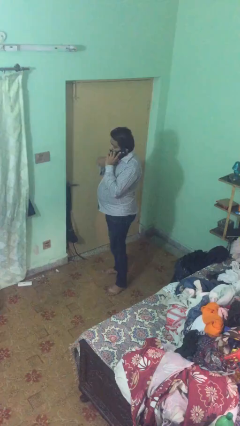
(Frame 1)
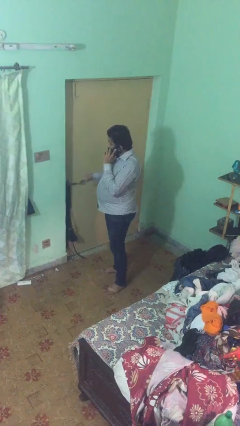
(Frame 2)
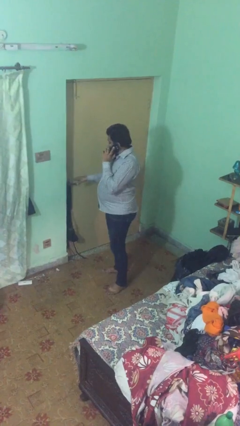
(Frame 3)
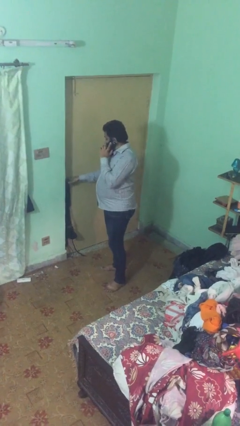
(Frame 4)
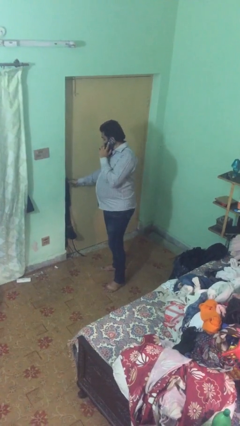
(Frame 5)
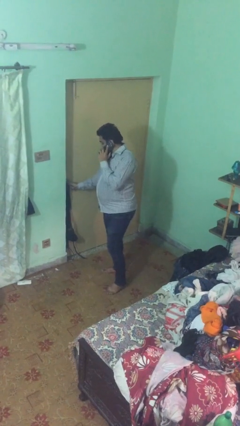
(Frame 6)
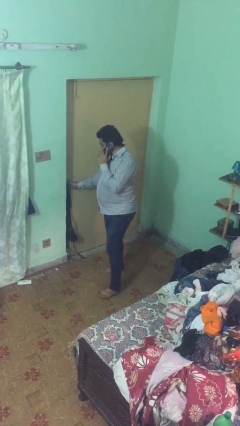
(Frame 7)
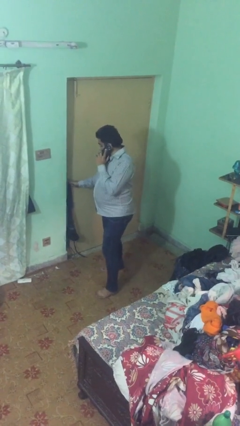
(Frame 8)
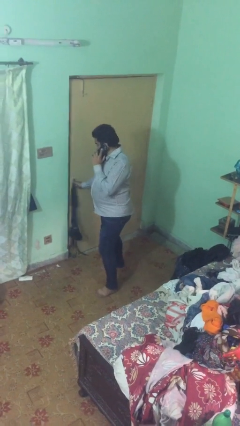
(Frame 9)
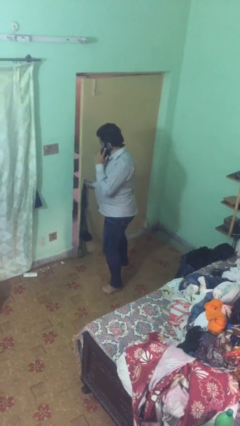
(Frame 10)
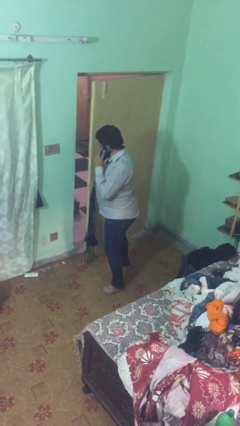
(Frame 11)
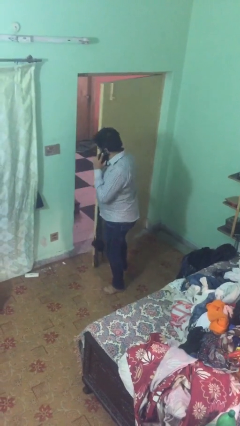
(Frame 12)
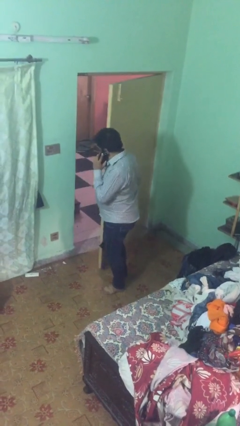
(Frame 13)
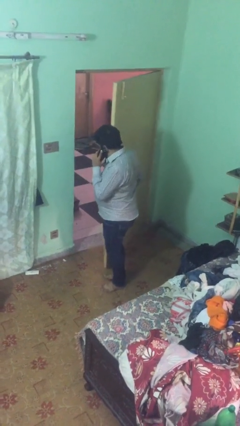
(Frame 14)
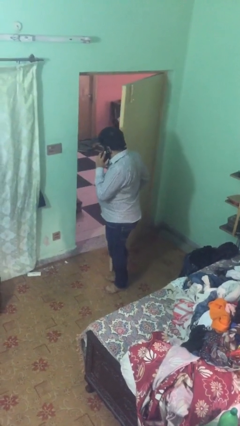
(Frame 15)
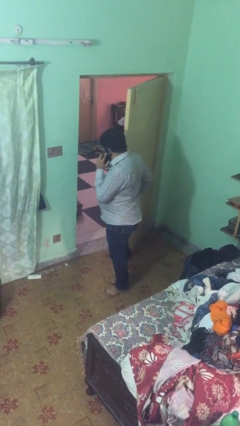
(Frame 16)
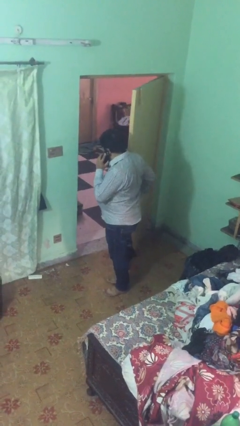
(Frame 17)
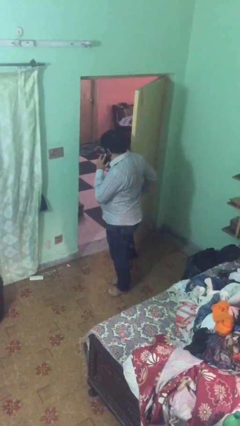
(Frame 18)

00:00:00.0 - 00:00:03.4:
person opens facility door

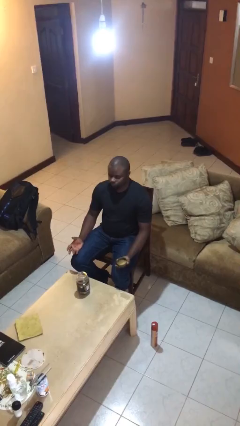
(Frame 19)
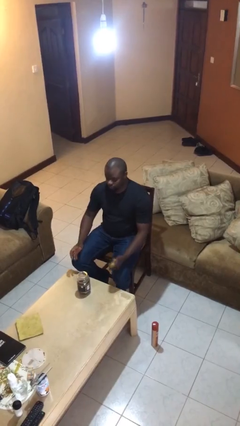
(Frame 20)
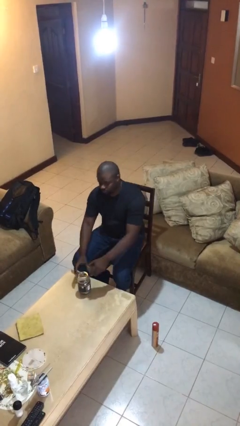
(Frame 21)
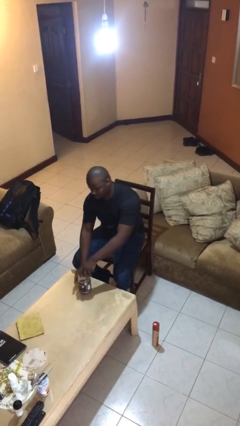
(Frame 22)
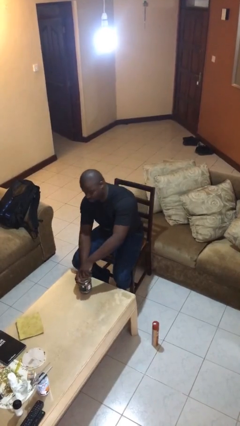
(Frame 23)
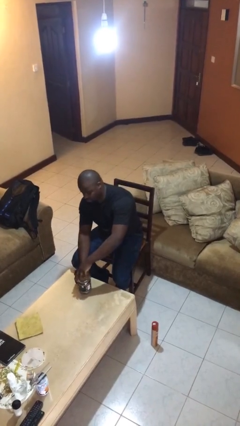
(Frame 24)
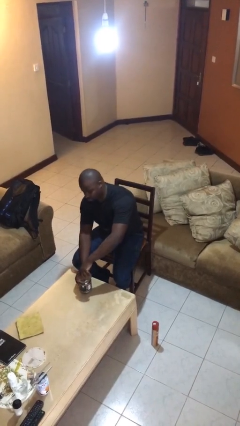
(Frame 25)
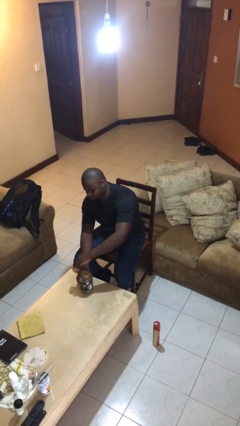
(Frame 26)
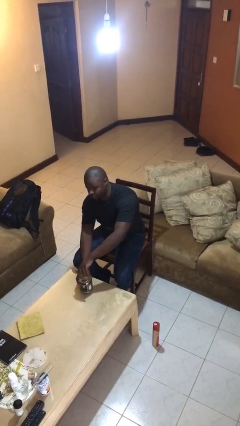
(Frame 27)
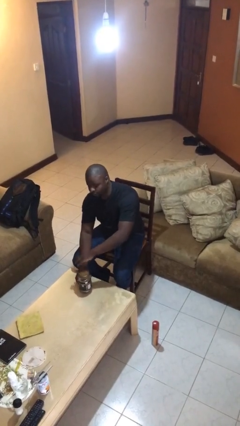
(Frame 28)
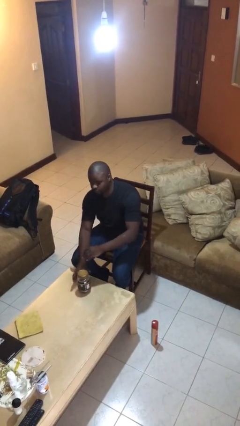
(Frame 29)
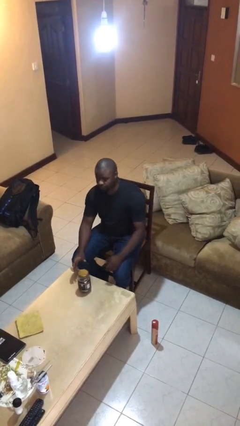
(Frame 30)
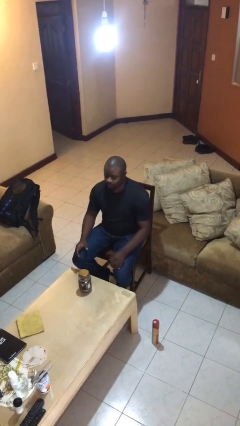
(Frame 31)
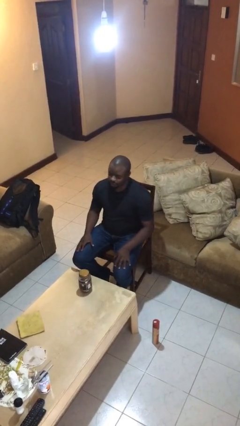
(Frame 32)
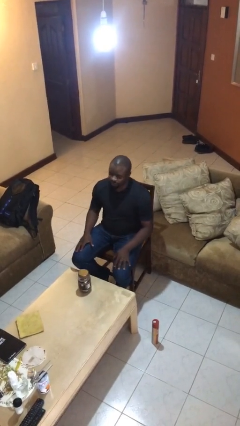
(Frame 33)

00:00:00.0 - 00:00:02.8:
person closes jar

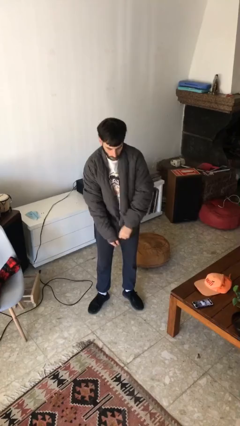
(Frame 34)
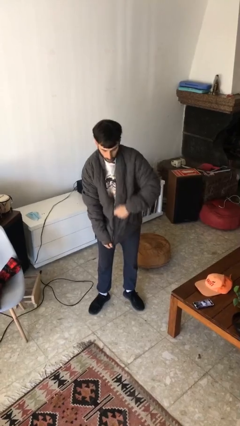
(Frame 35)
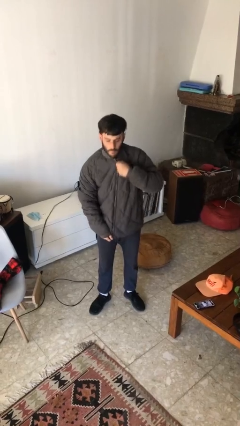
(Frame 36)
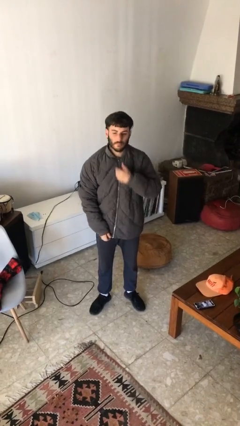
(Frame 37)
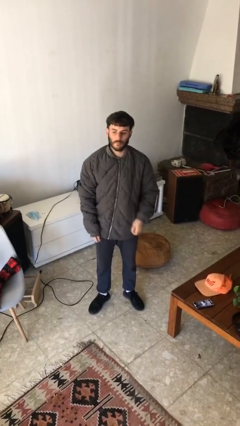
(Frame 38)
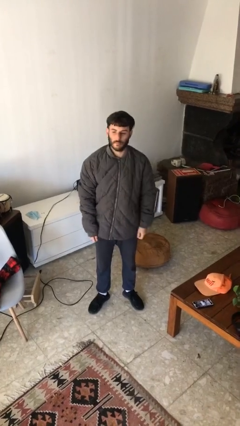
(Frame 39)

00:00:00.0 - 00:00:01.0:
person zips up jacket

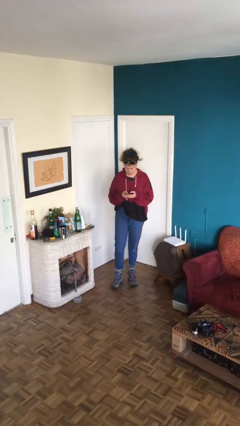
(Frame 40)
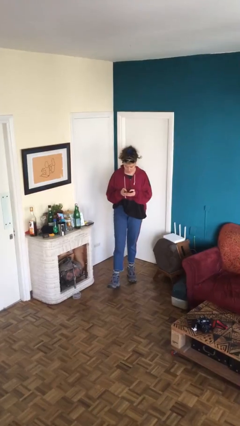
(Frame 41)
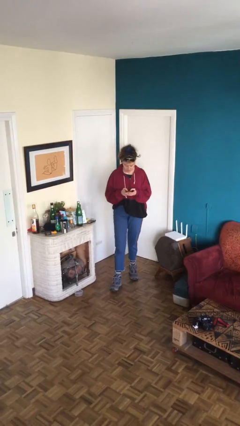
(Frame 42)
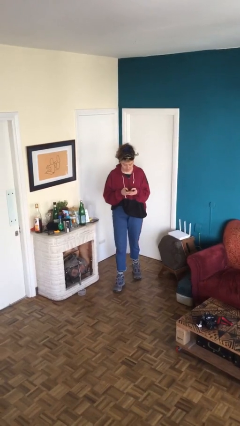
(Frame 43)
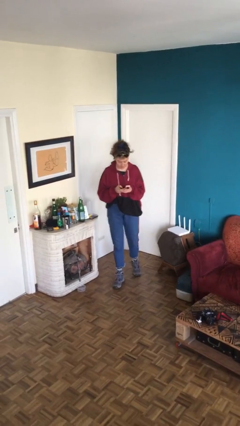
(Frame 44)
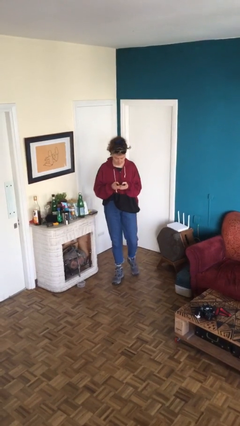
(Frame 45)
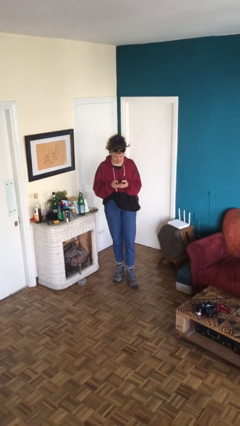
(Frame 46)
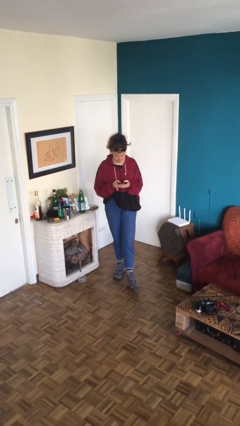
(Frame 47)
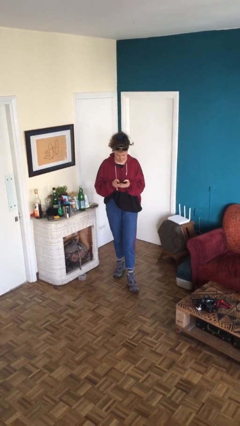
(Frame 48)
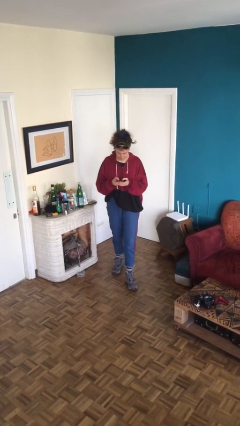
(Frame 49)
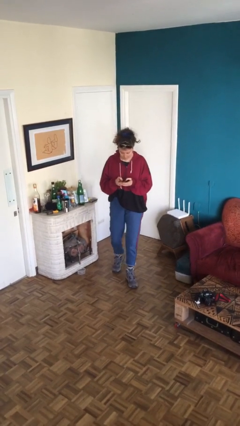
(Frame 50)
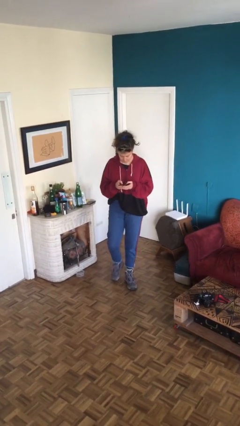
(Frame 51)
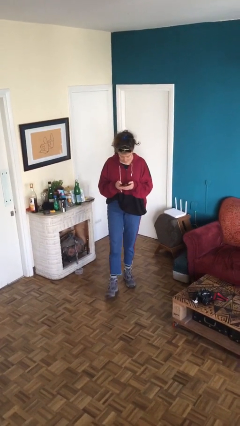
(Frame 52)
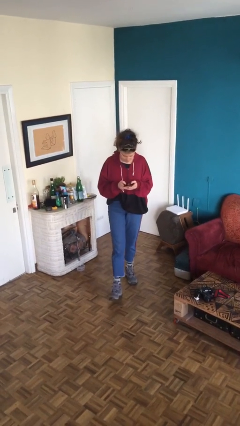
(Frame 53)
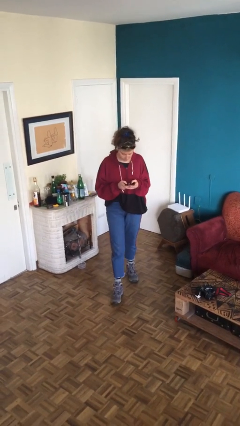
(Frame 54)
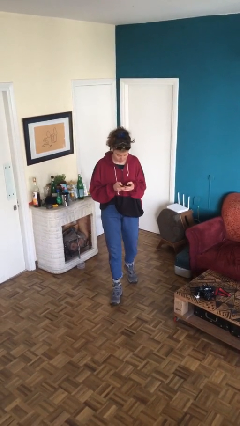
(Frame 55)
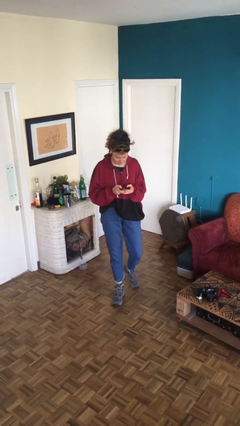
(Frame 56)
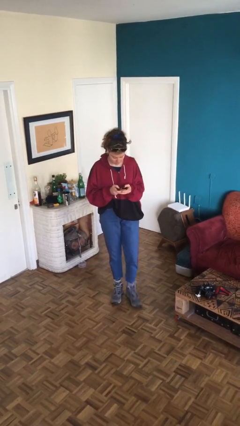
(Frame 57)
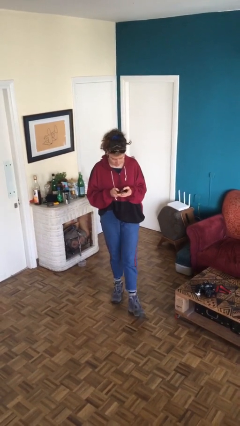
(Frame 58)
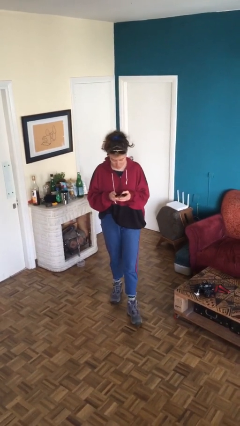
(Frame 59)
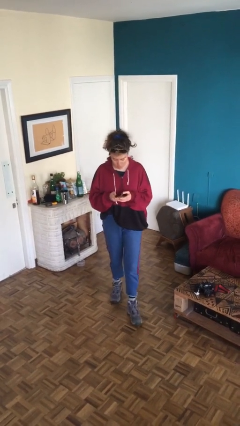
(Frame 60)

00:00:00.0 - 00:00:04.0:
person texts on phone

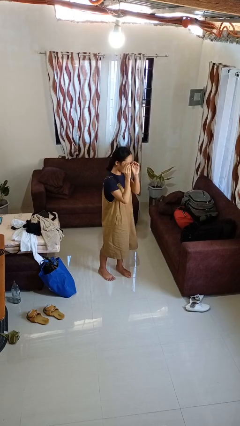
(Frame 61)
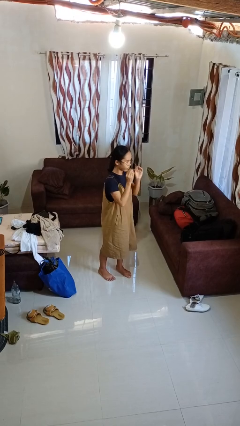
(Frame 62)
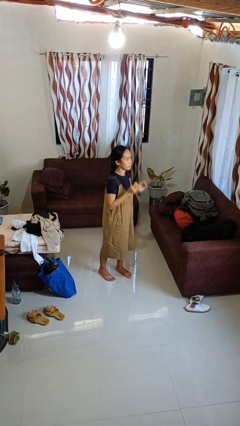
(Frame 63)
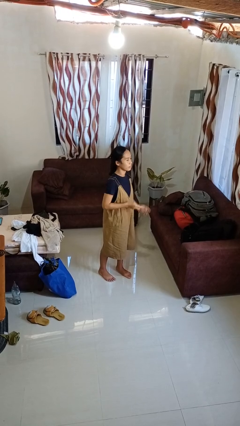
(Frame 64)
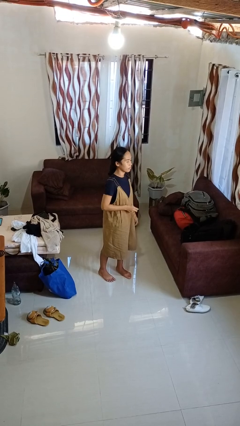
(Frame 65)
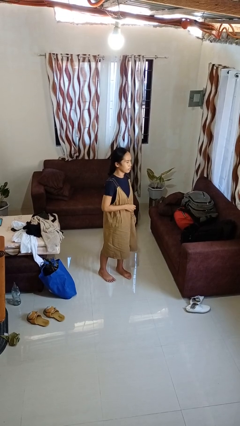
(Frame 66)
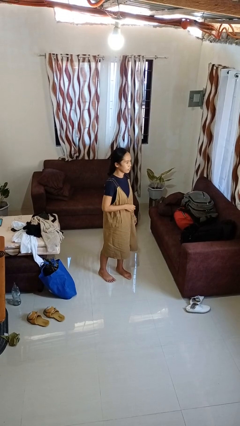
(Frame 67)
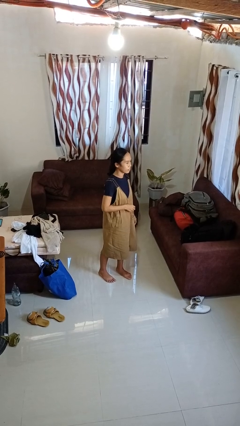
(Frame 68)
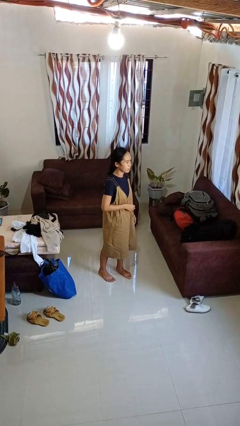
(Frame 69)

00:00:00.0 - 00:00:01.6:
person takes off glasses

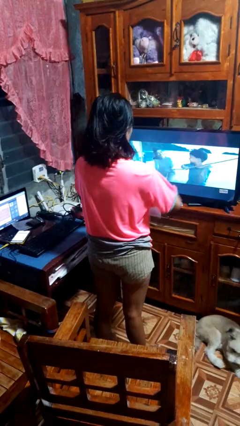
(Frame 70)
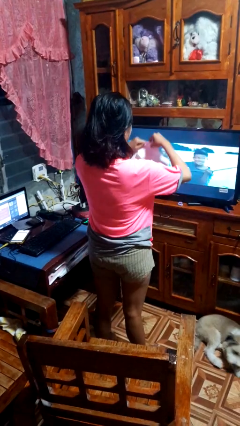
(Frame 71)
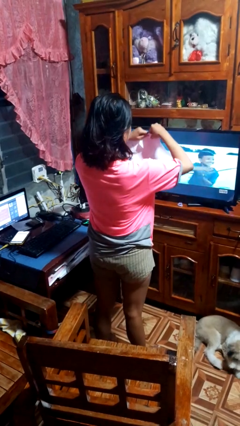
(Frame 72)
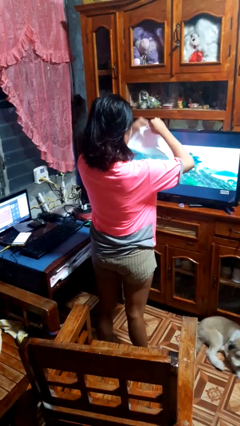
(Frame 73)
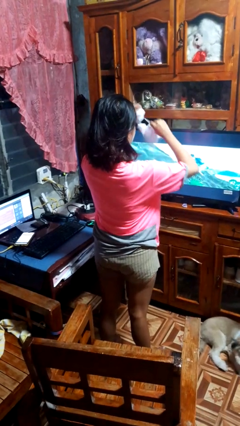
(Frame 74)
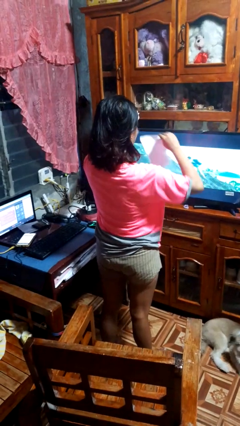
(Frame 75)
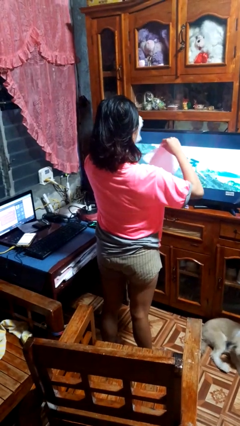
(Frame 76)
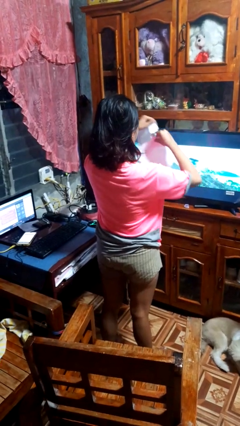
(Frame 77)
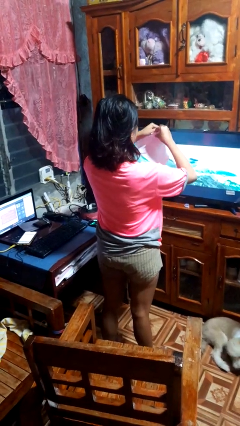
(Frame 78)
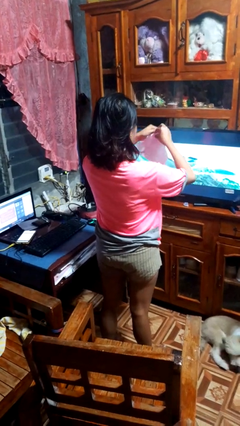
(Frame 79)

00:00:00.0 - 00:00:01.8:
person tears paper

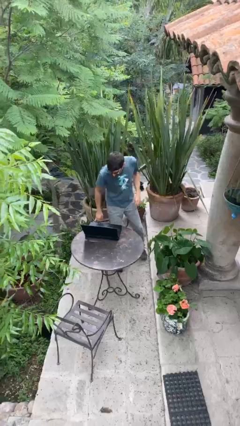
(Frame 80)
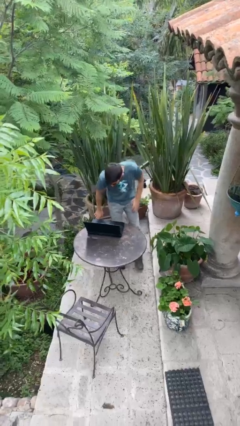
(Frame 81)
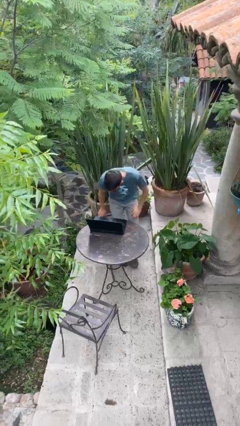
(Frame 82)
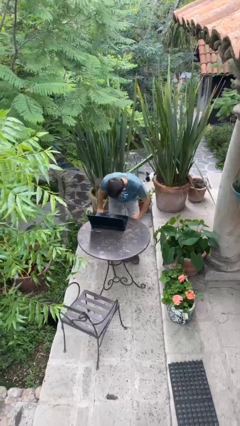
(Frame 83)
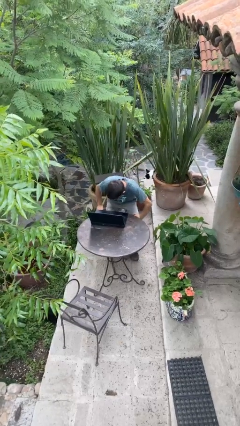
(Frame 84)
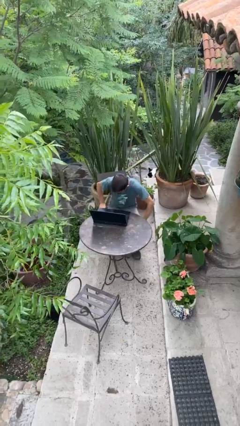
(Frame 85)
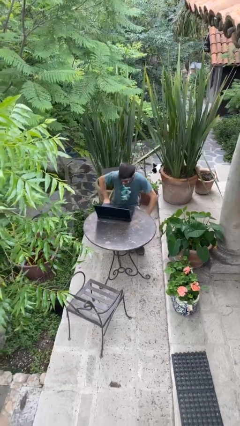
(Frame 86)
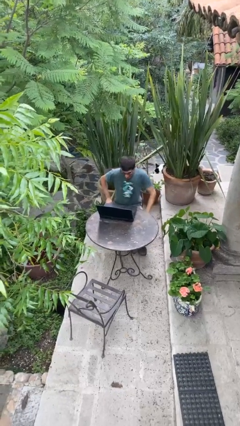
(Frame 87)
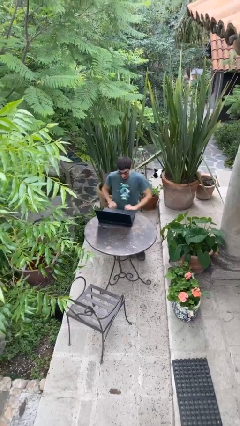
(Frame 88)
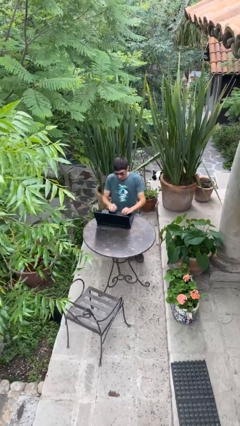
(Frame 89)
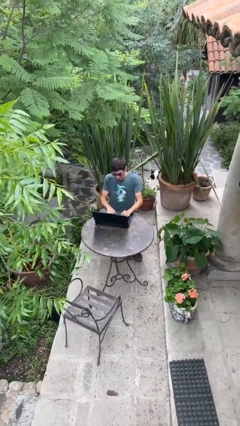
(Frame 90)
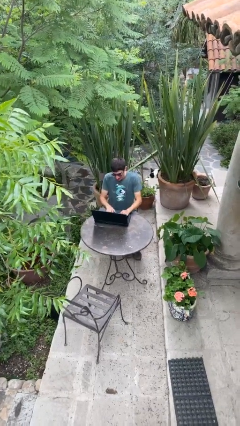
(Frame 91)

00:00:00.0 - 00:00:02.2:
person sits down
